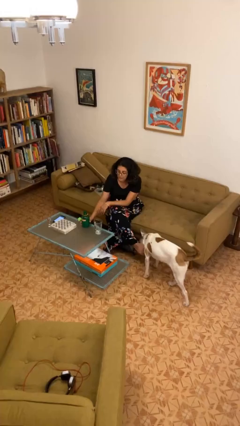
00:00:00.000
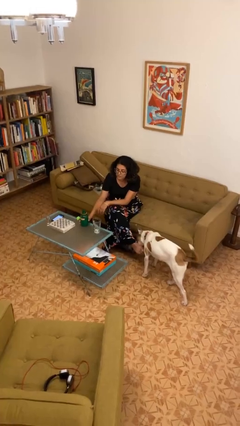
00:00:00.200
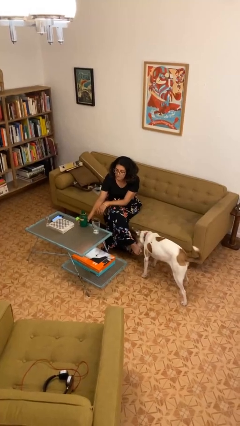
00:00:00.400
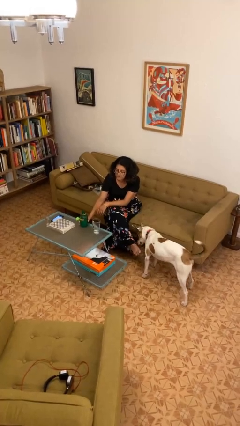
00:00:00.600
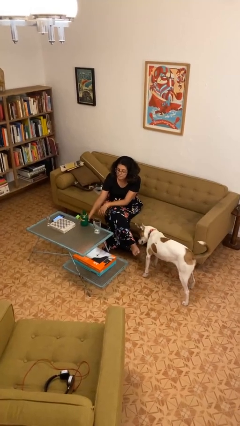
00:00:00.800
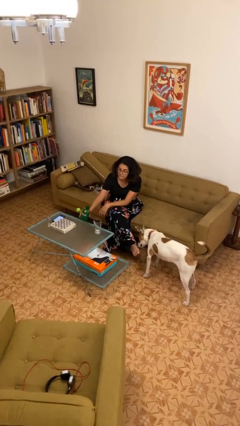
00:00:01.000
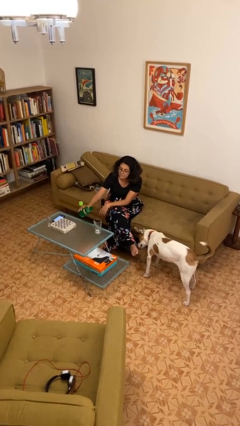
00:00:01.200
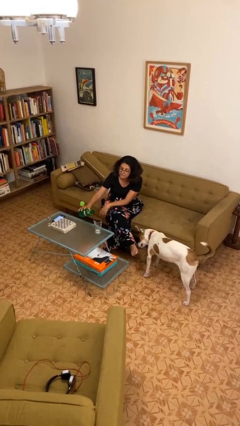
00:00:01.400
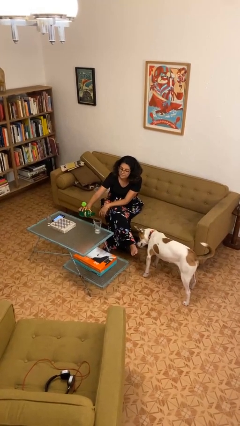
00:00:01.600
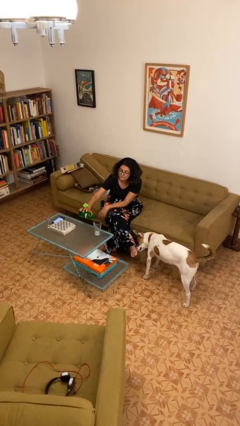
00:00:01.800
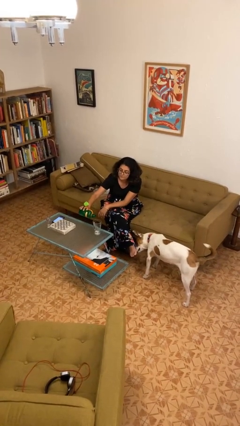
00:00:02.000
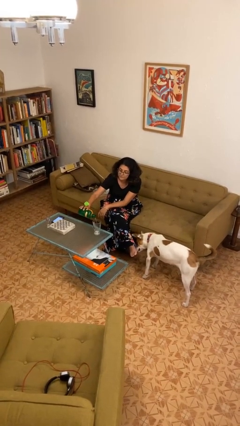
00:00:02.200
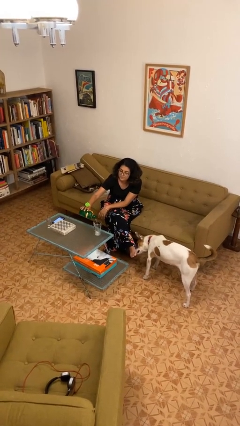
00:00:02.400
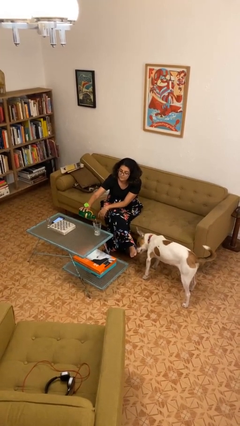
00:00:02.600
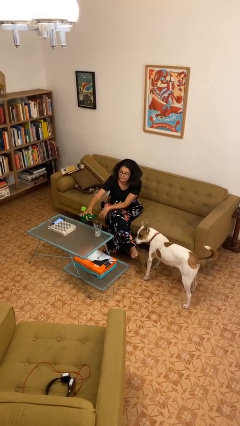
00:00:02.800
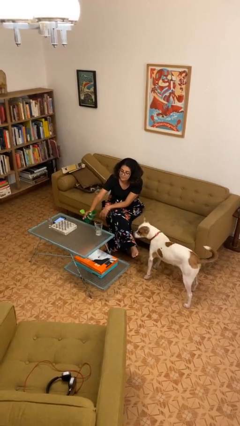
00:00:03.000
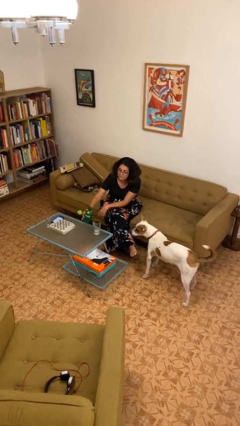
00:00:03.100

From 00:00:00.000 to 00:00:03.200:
person pours liquid into cup

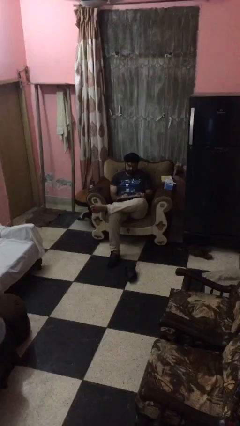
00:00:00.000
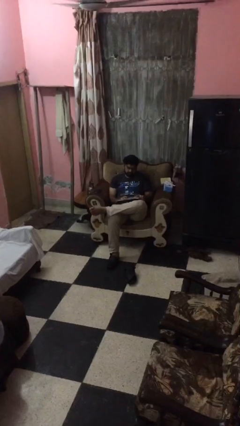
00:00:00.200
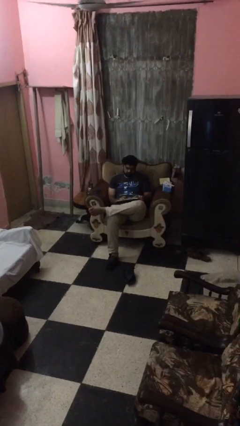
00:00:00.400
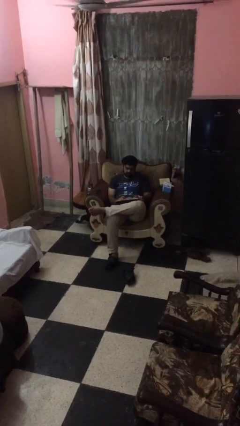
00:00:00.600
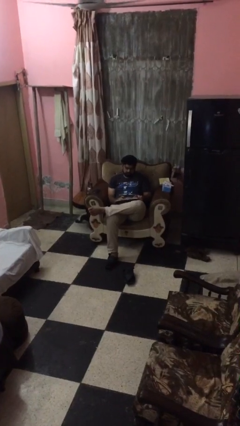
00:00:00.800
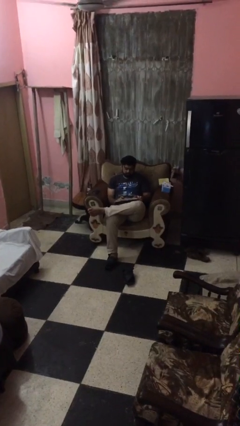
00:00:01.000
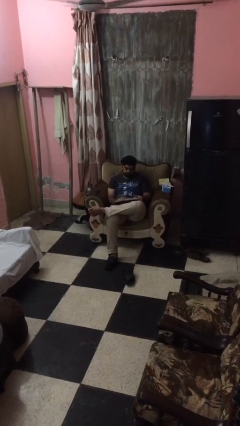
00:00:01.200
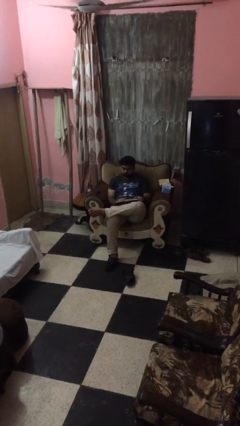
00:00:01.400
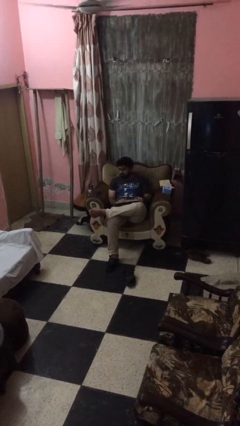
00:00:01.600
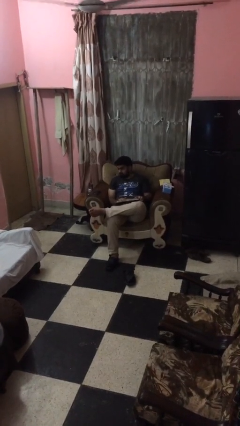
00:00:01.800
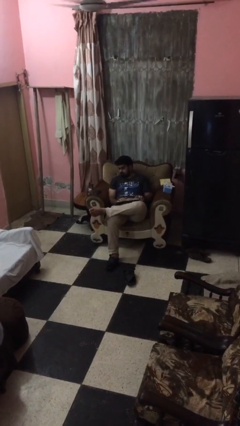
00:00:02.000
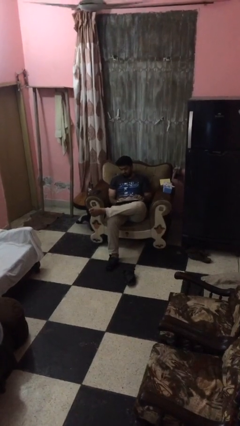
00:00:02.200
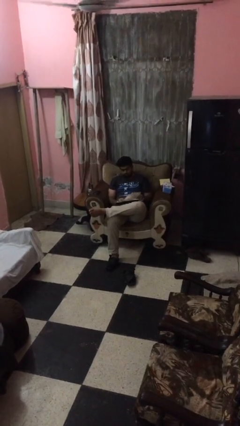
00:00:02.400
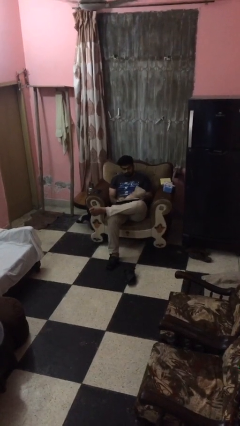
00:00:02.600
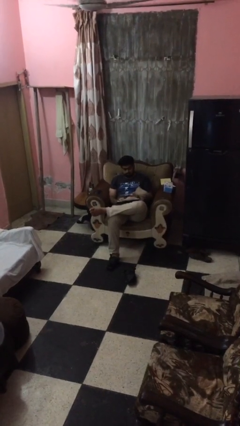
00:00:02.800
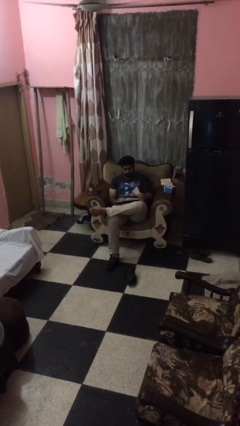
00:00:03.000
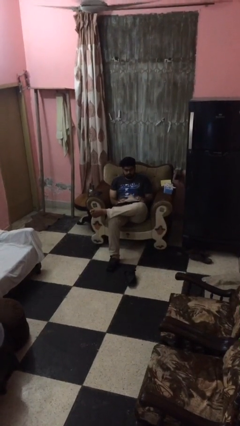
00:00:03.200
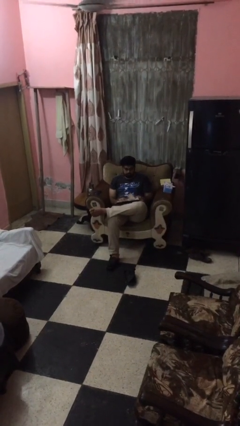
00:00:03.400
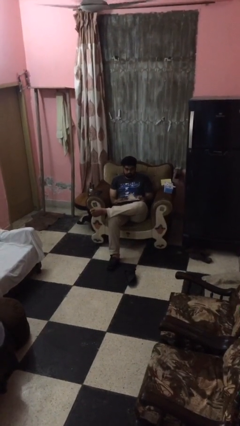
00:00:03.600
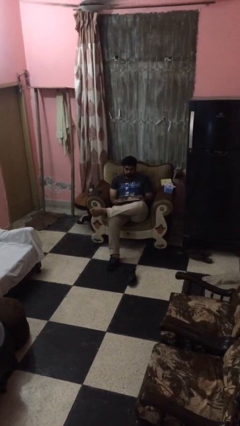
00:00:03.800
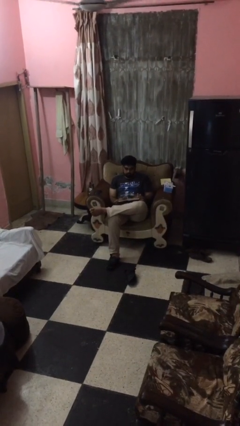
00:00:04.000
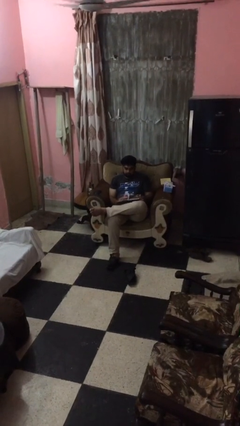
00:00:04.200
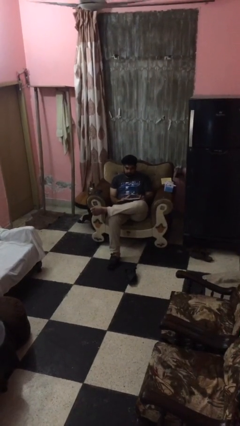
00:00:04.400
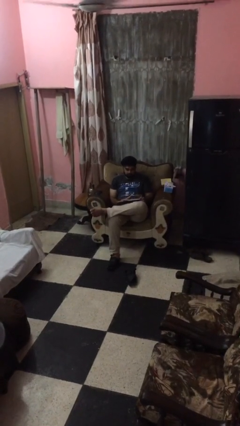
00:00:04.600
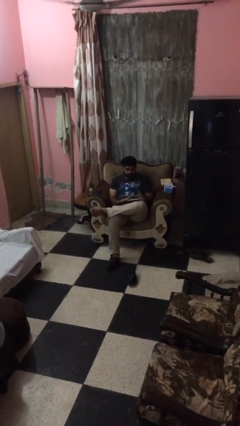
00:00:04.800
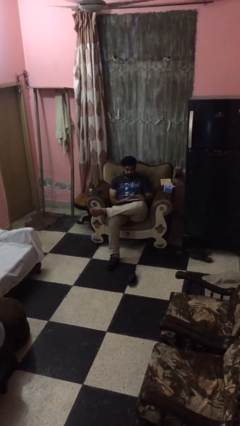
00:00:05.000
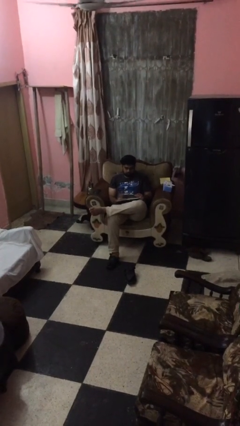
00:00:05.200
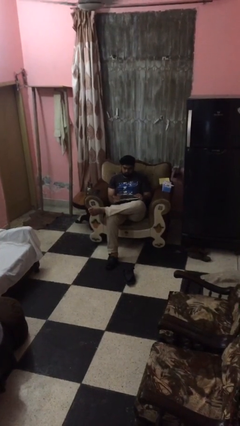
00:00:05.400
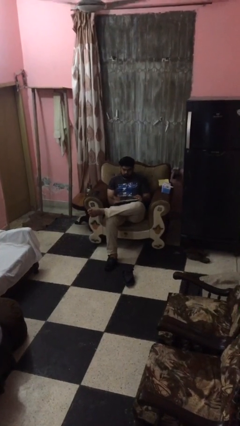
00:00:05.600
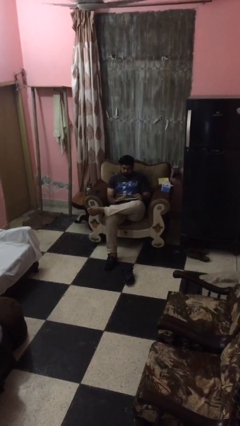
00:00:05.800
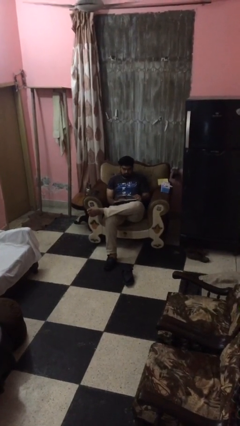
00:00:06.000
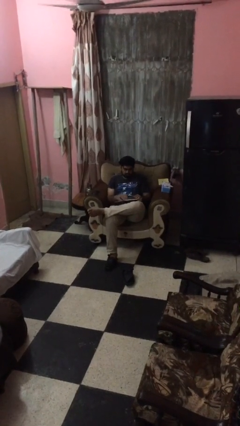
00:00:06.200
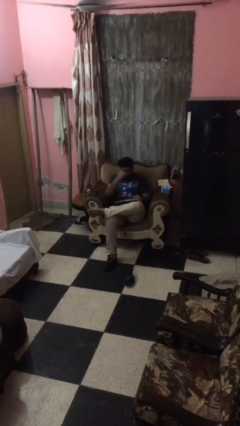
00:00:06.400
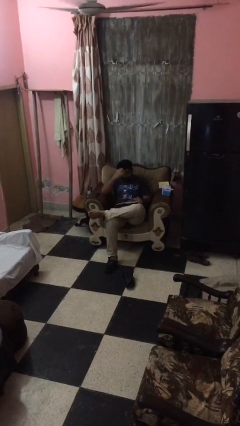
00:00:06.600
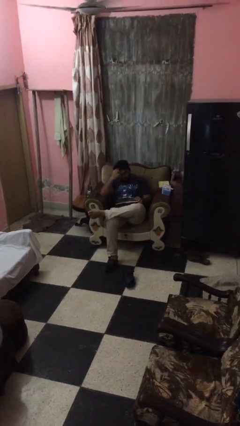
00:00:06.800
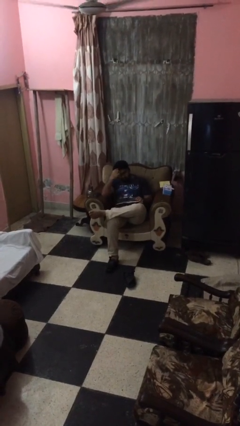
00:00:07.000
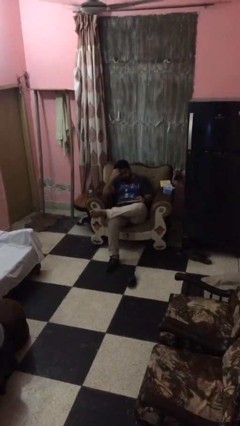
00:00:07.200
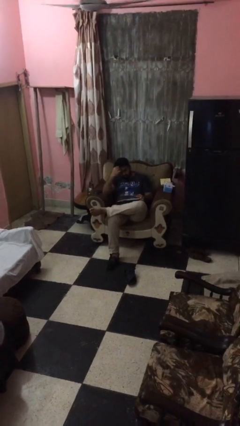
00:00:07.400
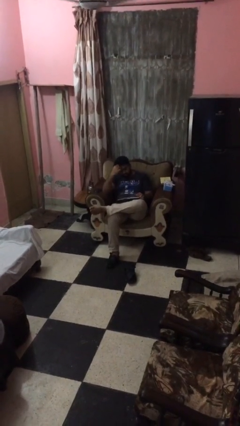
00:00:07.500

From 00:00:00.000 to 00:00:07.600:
person reads document

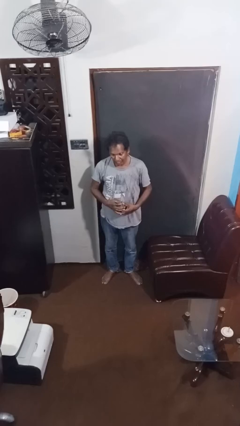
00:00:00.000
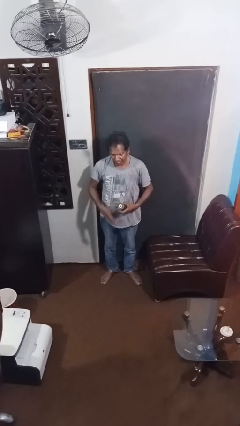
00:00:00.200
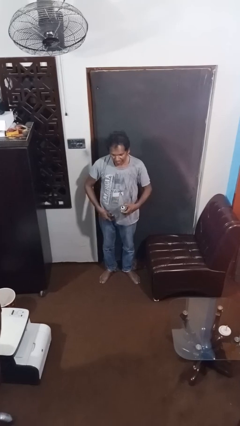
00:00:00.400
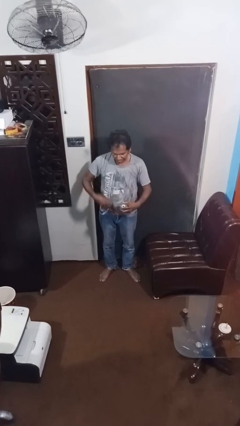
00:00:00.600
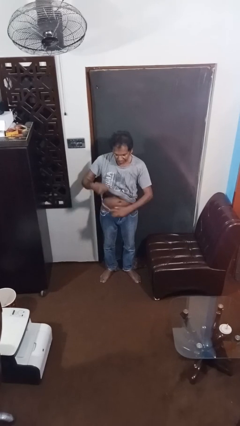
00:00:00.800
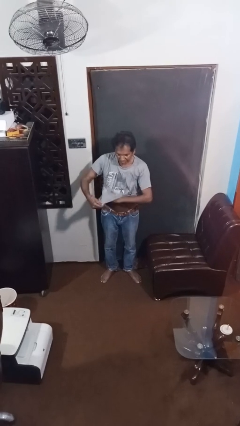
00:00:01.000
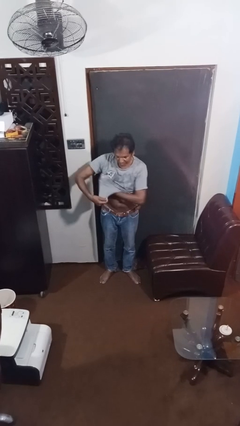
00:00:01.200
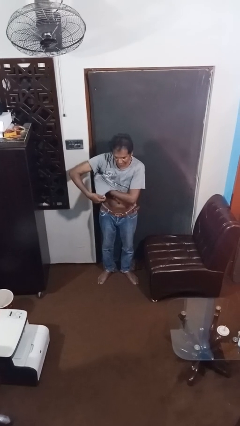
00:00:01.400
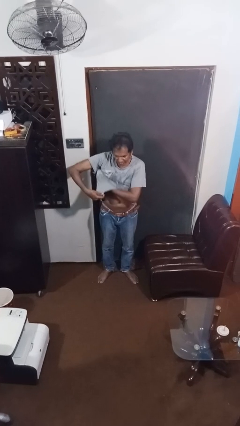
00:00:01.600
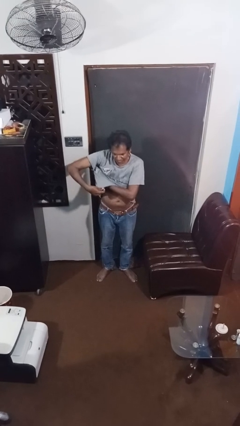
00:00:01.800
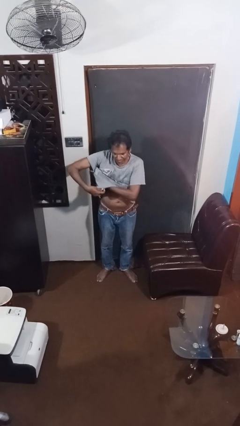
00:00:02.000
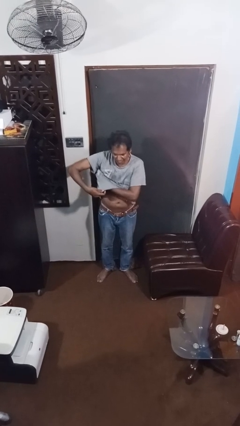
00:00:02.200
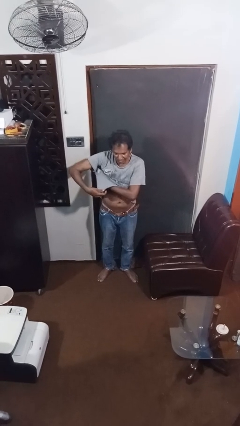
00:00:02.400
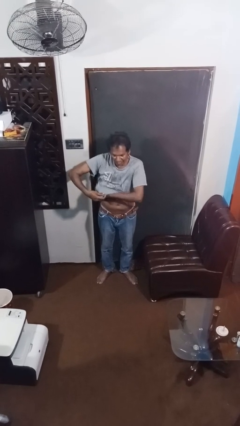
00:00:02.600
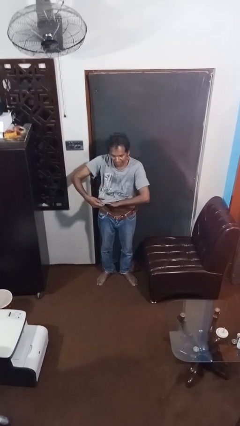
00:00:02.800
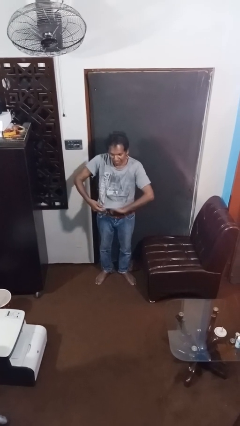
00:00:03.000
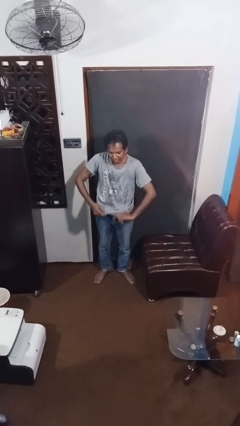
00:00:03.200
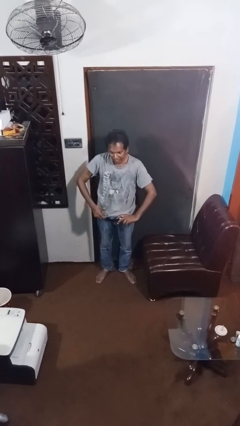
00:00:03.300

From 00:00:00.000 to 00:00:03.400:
person applies deodorant

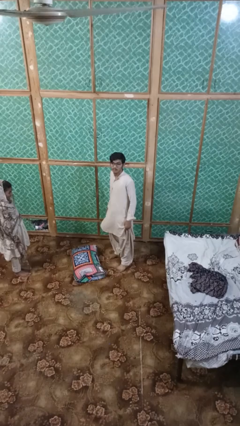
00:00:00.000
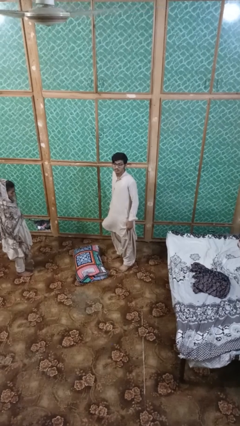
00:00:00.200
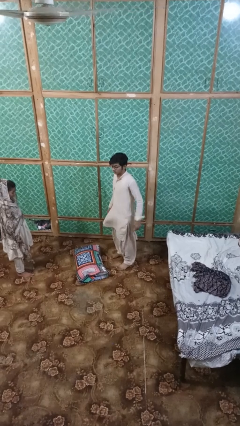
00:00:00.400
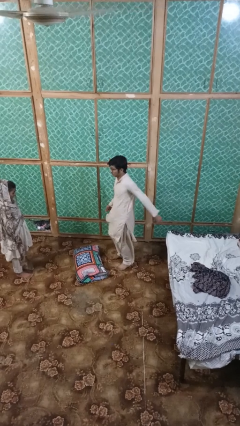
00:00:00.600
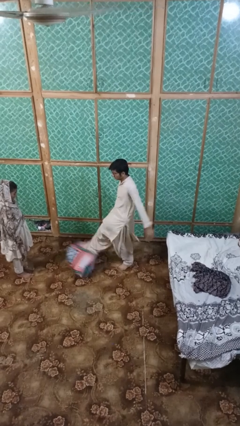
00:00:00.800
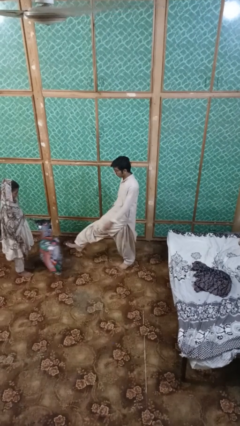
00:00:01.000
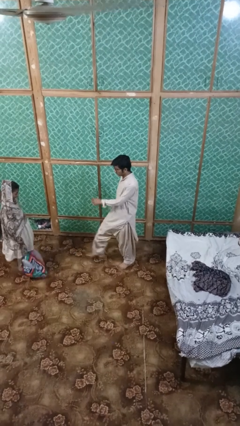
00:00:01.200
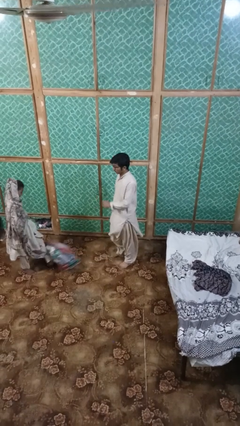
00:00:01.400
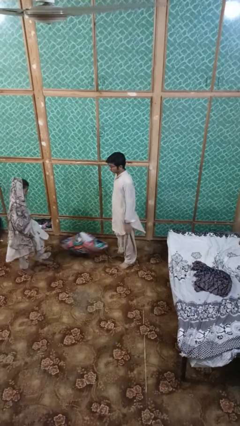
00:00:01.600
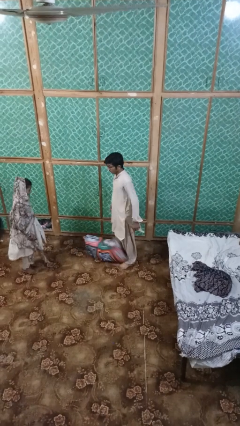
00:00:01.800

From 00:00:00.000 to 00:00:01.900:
person kicks object to person

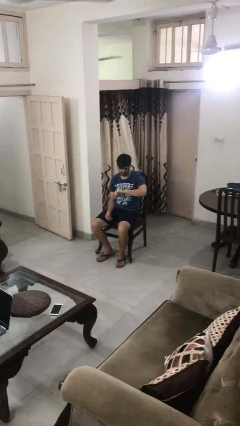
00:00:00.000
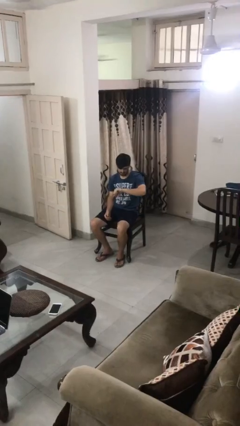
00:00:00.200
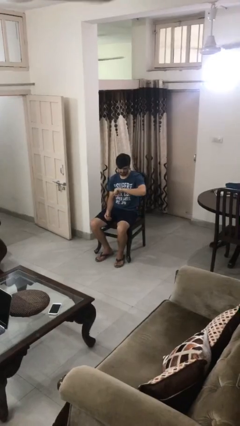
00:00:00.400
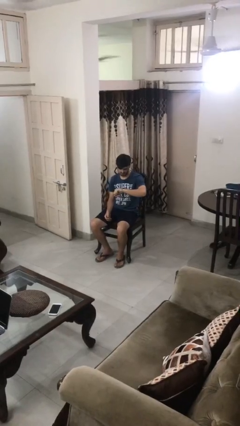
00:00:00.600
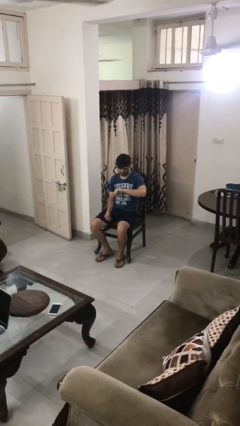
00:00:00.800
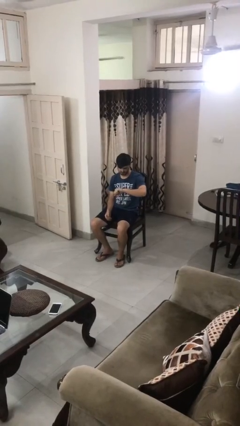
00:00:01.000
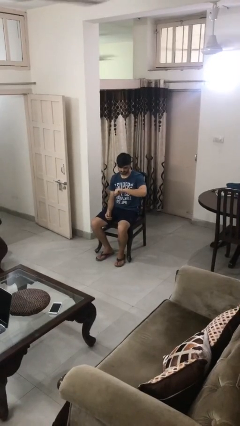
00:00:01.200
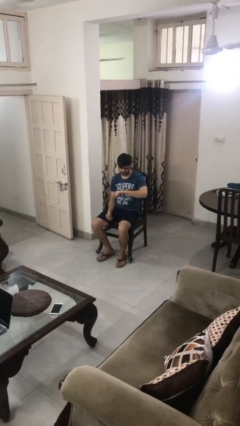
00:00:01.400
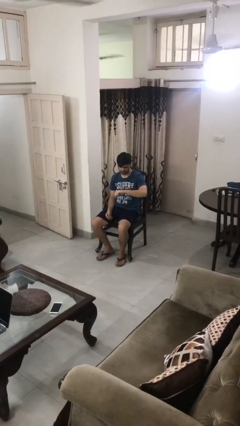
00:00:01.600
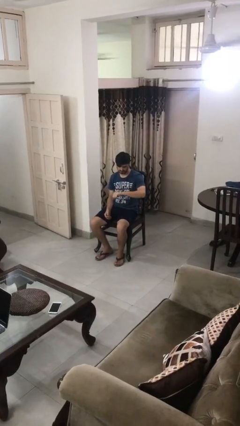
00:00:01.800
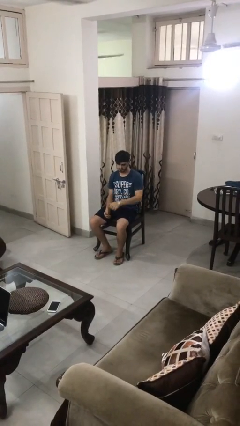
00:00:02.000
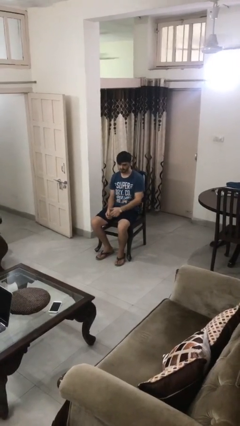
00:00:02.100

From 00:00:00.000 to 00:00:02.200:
person looks at wristwatch
